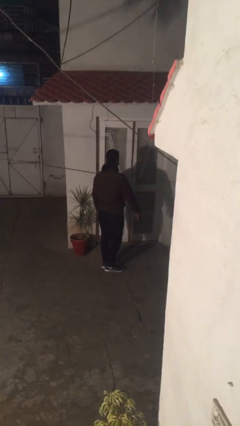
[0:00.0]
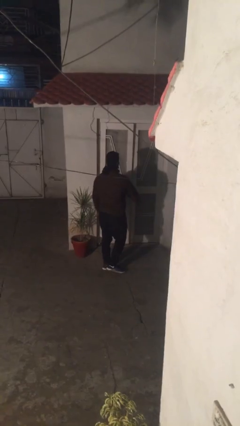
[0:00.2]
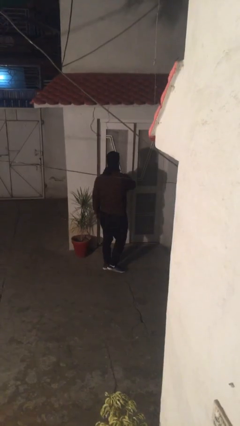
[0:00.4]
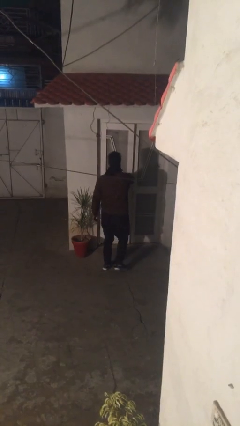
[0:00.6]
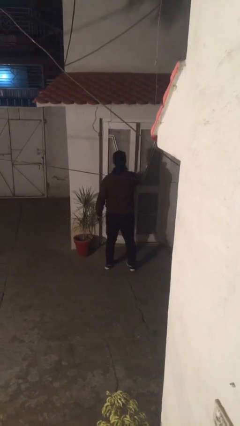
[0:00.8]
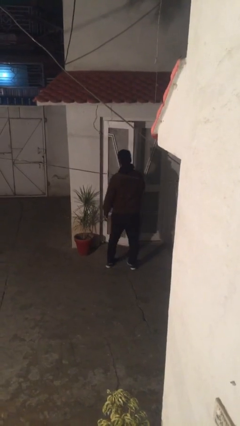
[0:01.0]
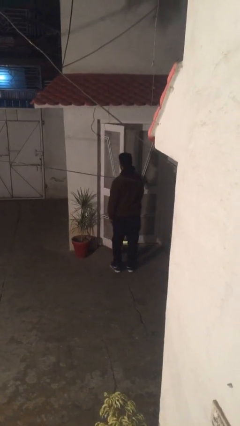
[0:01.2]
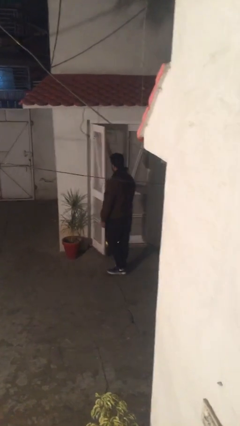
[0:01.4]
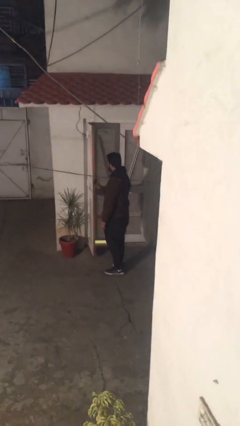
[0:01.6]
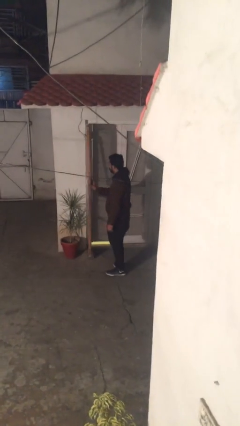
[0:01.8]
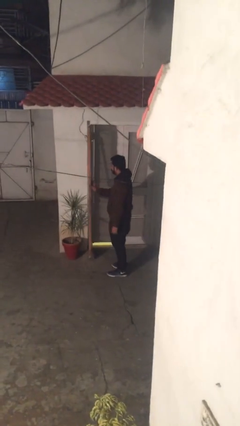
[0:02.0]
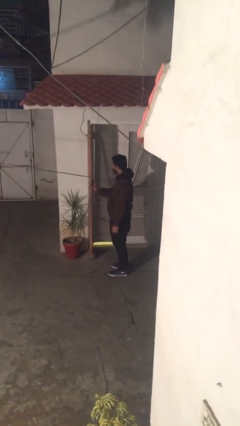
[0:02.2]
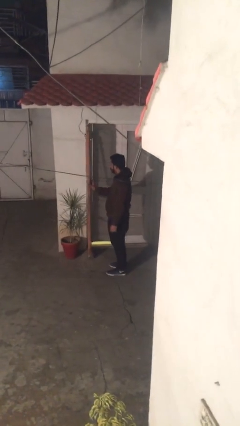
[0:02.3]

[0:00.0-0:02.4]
person opens facility door

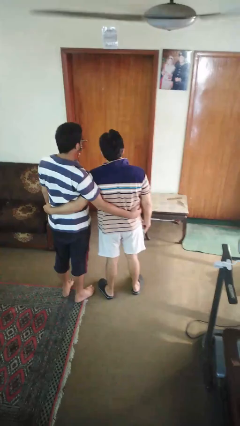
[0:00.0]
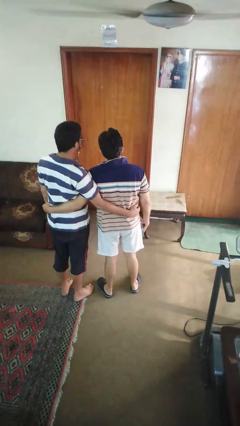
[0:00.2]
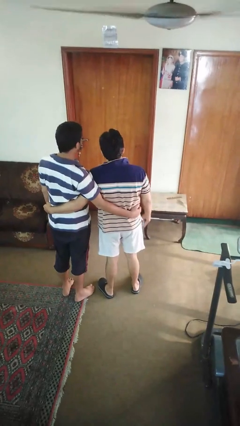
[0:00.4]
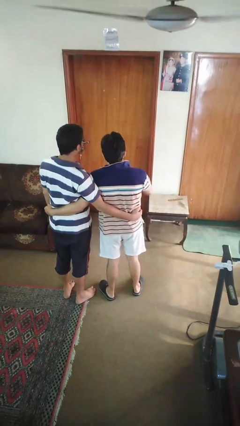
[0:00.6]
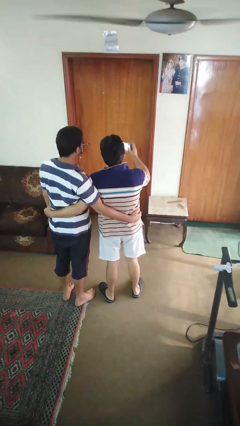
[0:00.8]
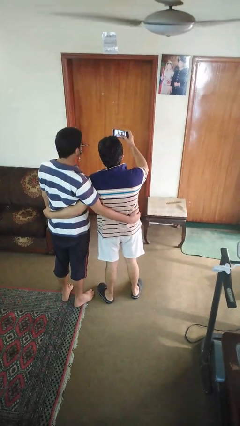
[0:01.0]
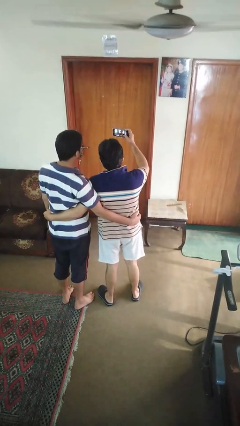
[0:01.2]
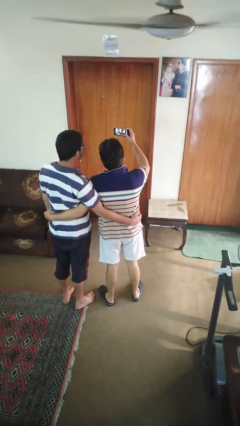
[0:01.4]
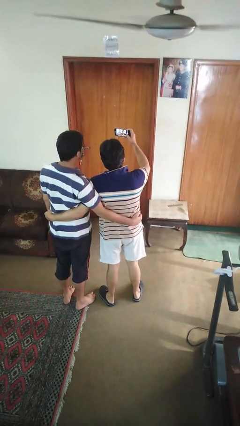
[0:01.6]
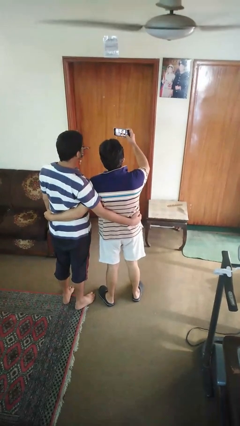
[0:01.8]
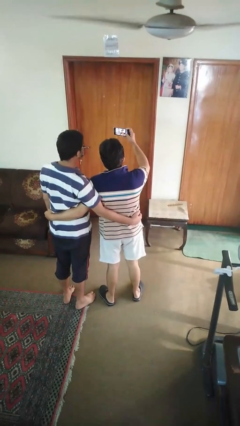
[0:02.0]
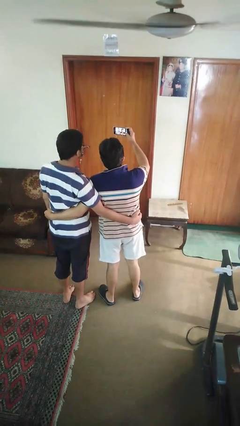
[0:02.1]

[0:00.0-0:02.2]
person takes selfie with person

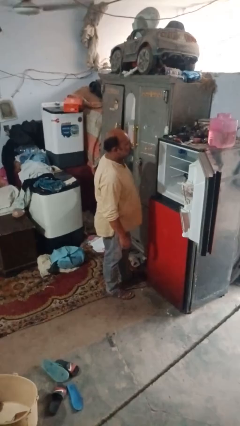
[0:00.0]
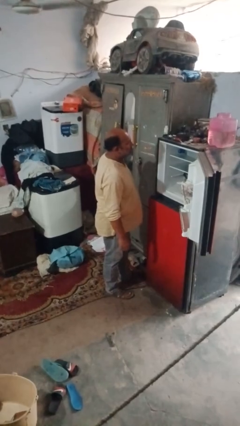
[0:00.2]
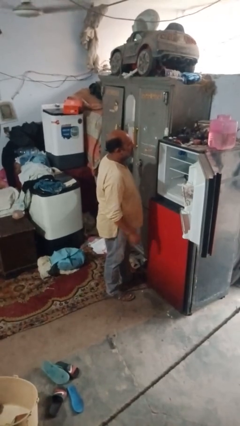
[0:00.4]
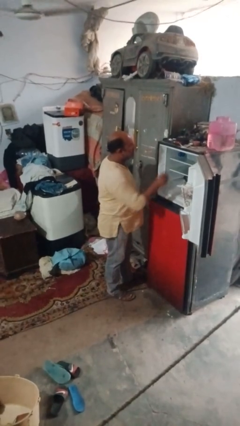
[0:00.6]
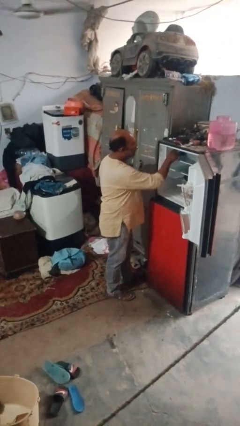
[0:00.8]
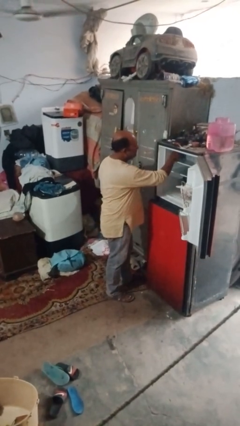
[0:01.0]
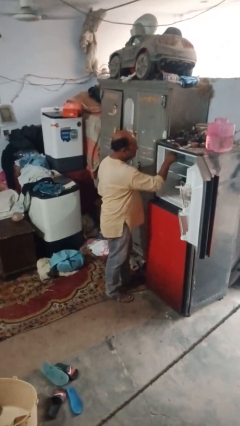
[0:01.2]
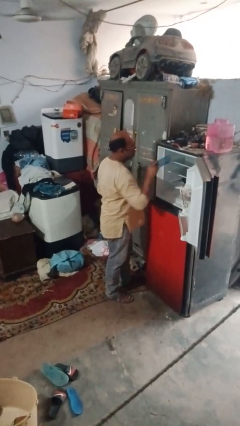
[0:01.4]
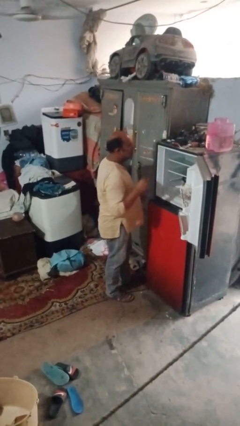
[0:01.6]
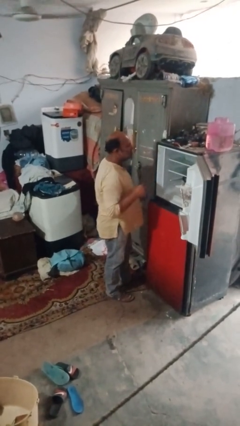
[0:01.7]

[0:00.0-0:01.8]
person takes object from refrigerator

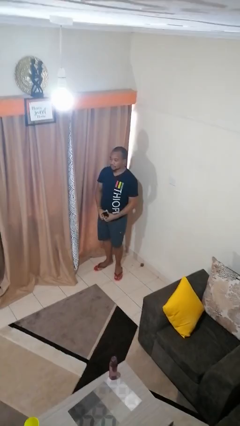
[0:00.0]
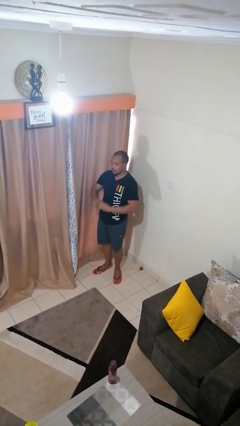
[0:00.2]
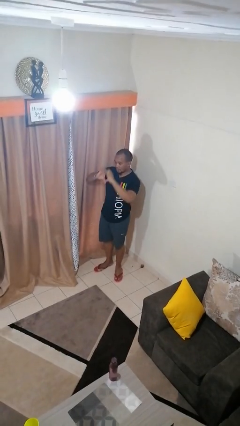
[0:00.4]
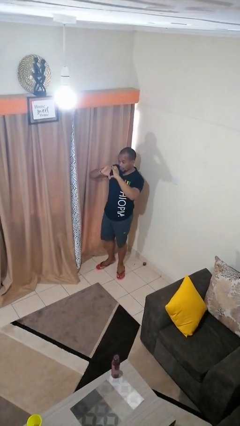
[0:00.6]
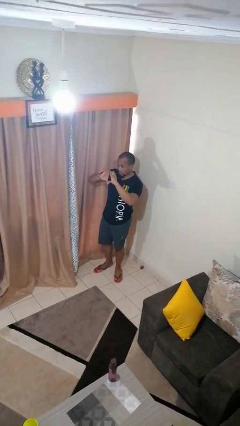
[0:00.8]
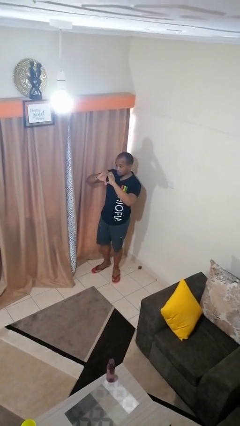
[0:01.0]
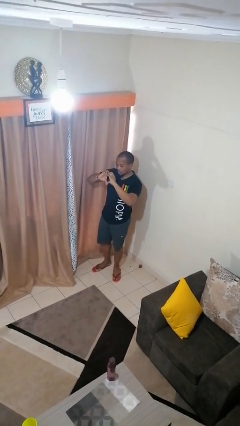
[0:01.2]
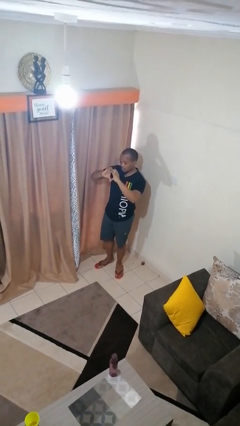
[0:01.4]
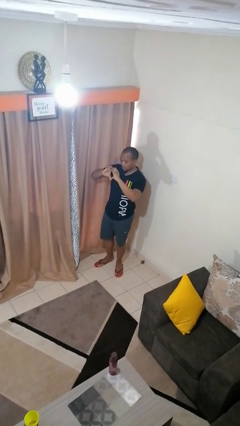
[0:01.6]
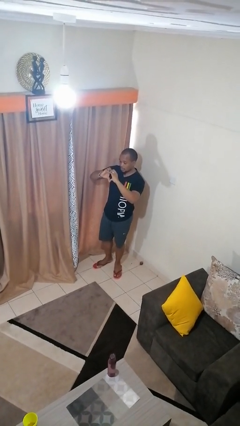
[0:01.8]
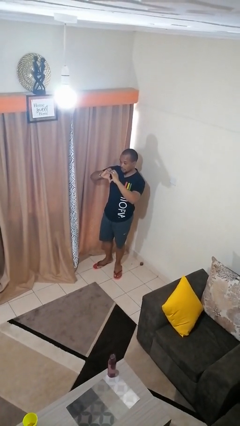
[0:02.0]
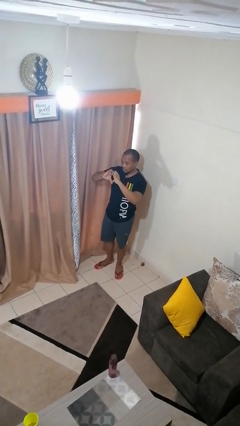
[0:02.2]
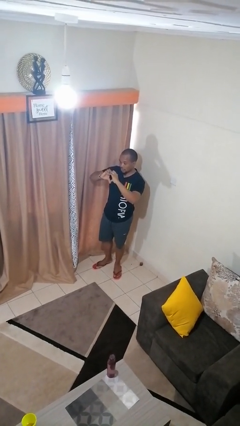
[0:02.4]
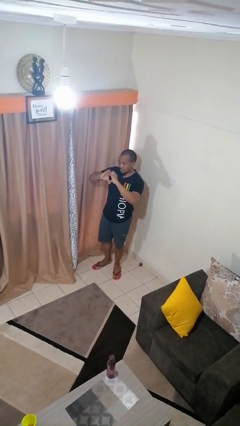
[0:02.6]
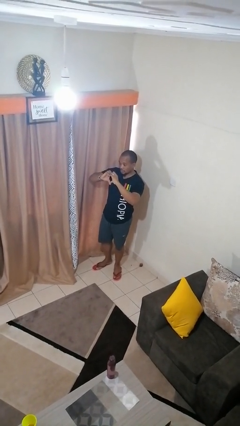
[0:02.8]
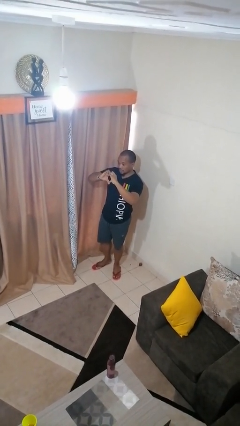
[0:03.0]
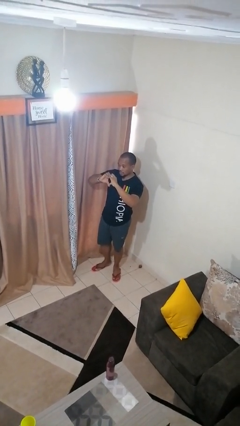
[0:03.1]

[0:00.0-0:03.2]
person gestures heart

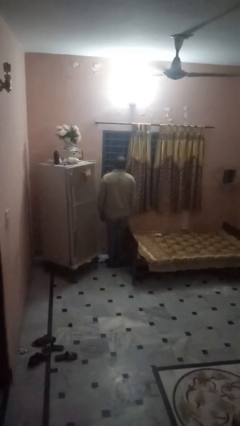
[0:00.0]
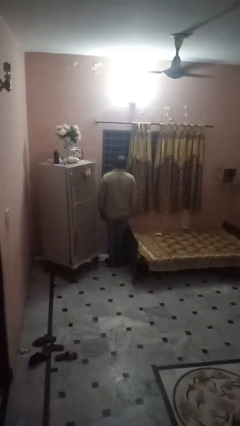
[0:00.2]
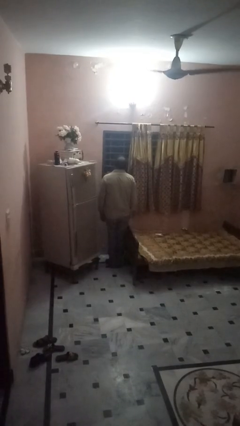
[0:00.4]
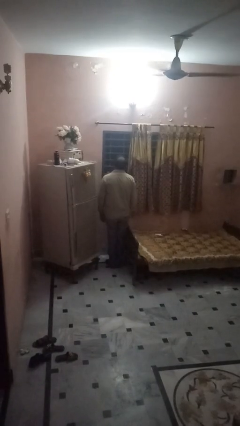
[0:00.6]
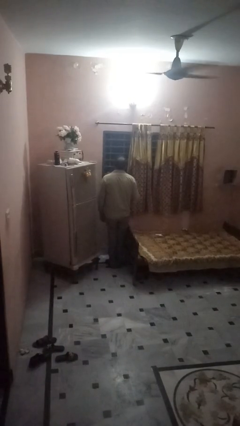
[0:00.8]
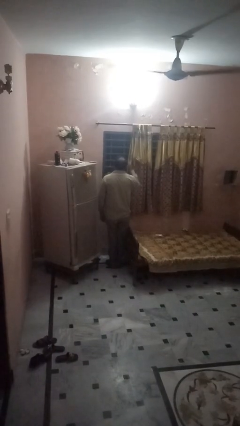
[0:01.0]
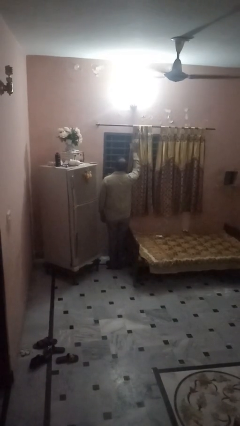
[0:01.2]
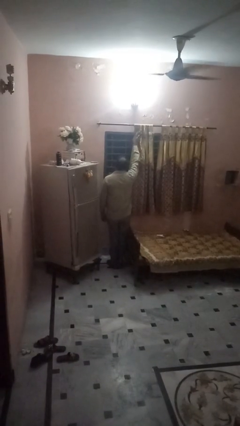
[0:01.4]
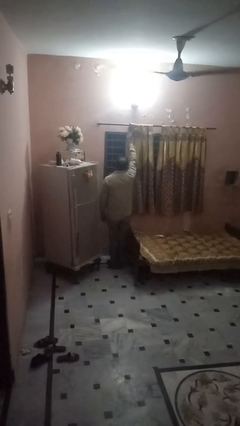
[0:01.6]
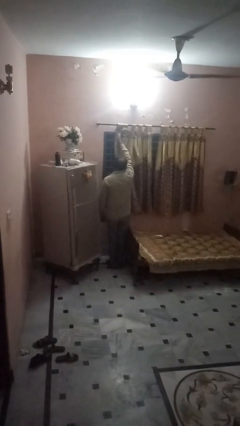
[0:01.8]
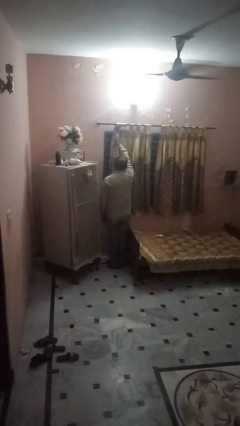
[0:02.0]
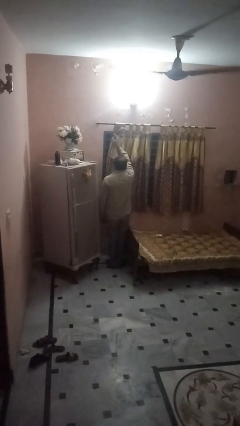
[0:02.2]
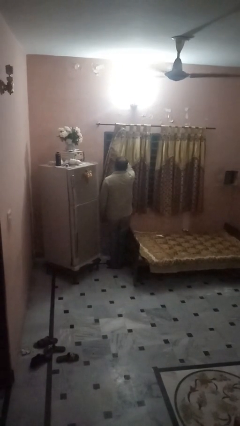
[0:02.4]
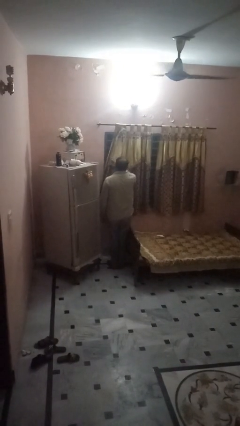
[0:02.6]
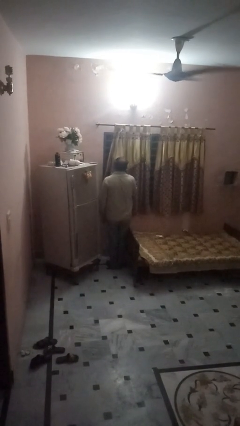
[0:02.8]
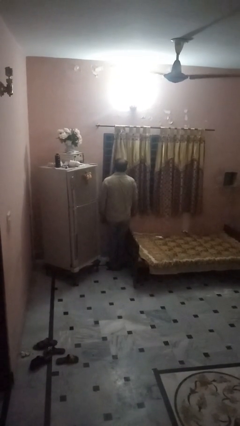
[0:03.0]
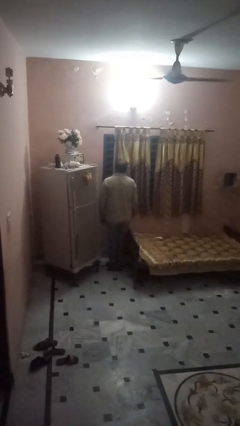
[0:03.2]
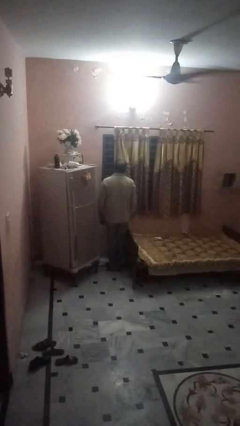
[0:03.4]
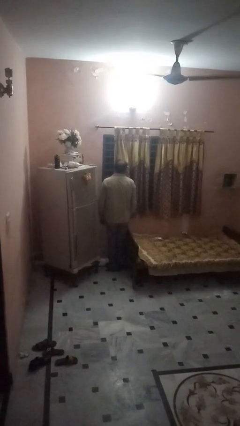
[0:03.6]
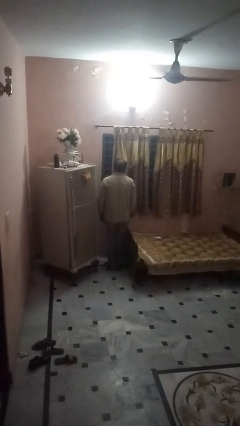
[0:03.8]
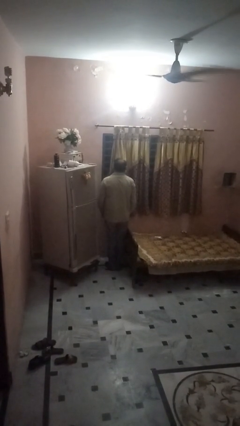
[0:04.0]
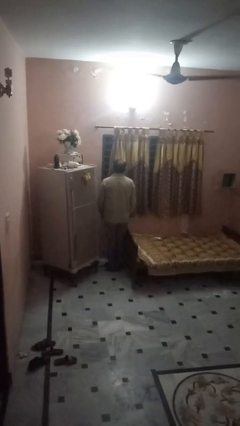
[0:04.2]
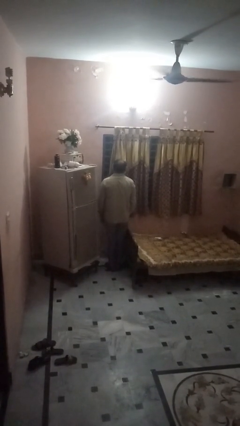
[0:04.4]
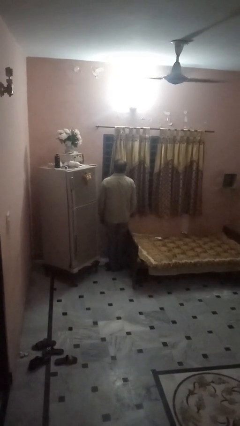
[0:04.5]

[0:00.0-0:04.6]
person closes curtains

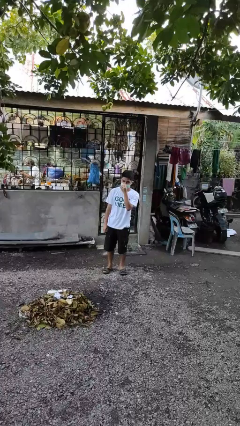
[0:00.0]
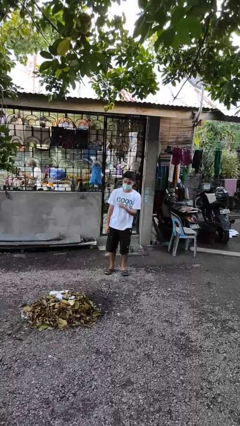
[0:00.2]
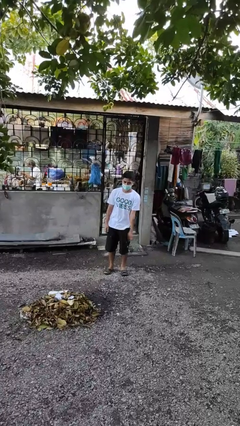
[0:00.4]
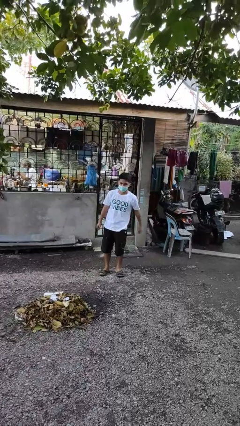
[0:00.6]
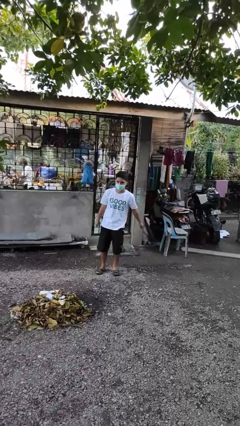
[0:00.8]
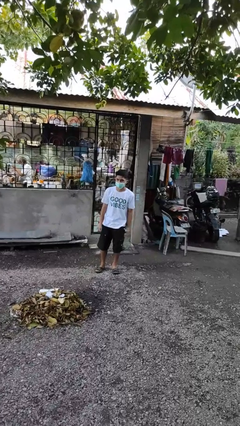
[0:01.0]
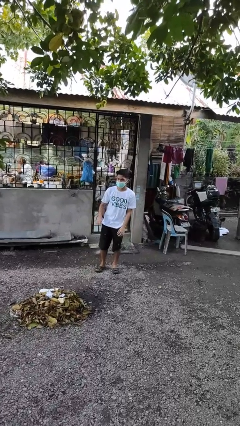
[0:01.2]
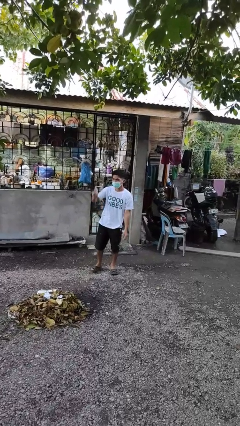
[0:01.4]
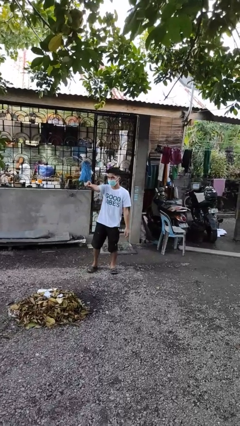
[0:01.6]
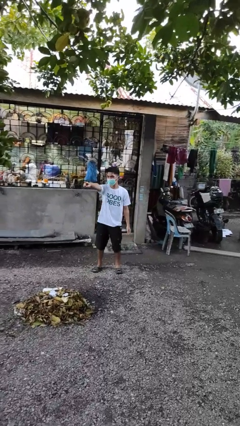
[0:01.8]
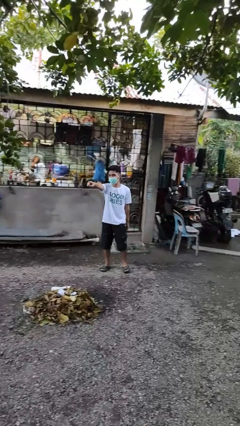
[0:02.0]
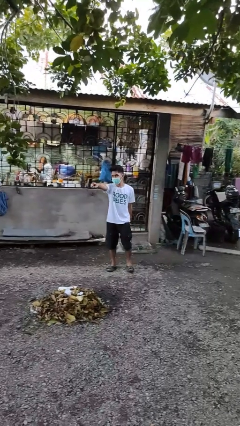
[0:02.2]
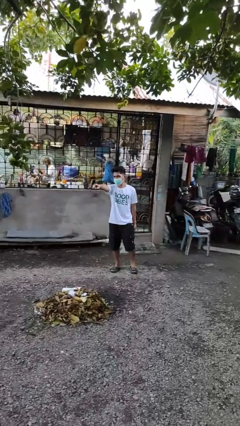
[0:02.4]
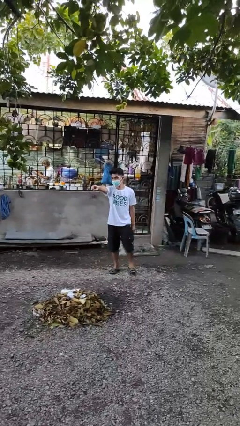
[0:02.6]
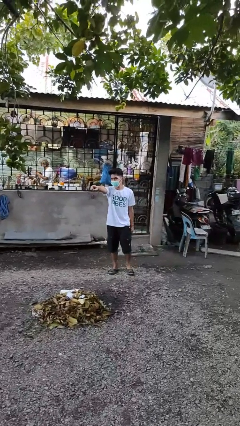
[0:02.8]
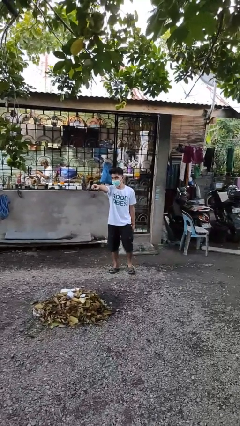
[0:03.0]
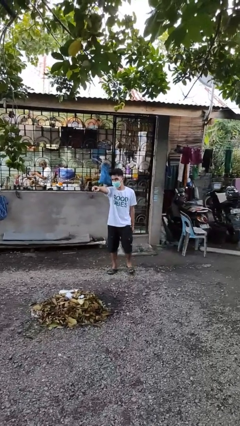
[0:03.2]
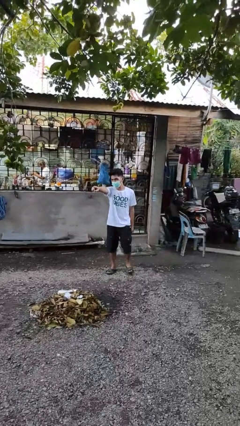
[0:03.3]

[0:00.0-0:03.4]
person points at person

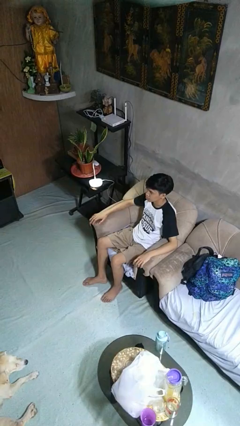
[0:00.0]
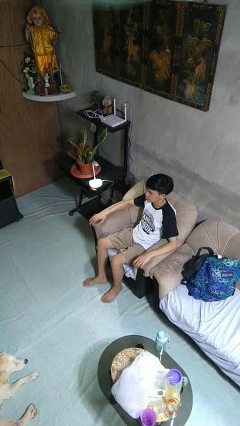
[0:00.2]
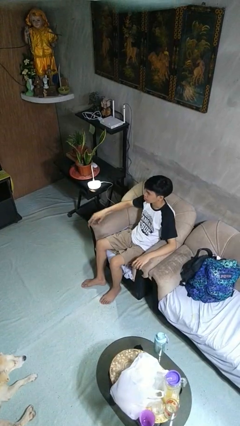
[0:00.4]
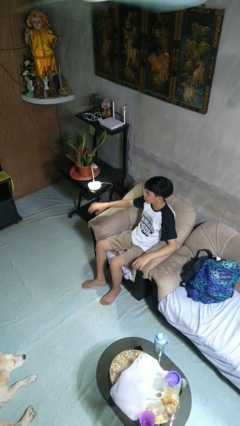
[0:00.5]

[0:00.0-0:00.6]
person turns off lamp
